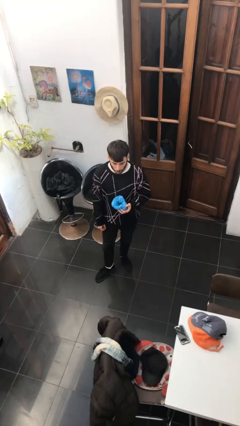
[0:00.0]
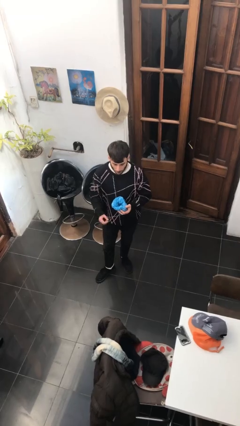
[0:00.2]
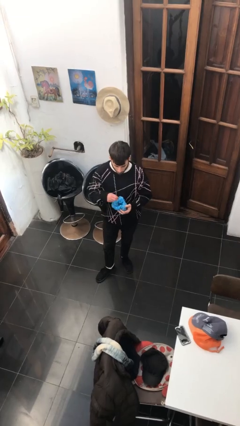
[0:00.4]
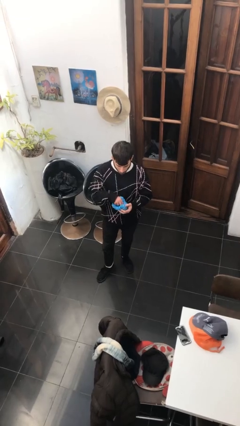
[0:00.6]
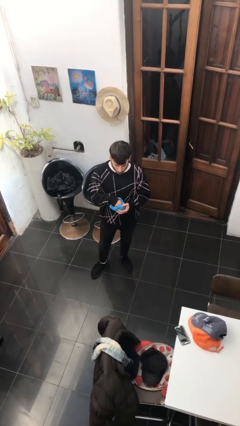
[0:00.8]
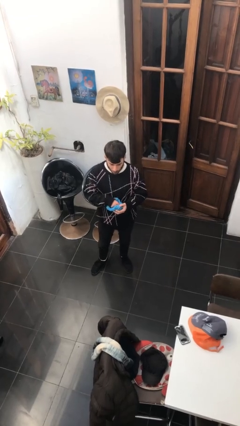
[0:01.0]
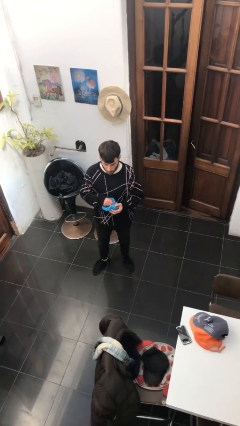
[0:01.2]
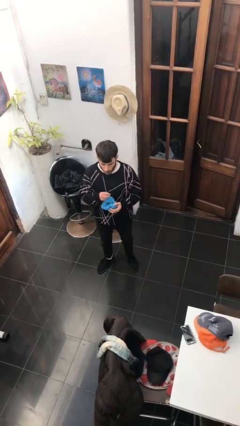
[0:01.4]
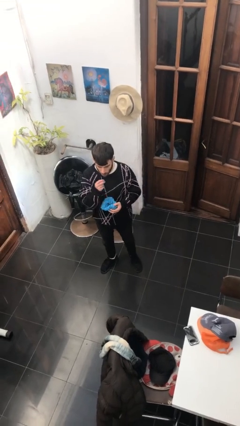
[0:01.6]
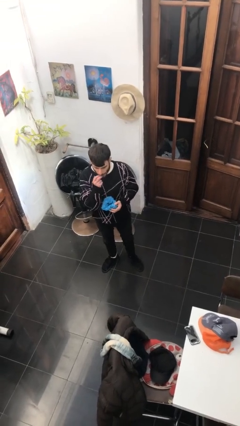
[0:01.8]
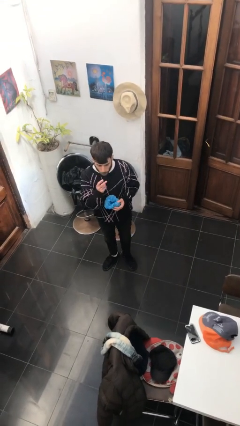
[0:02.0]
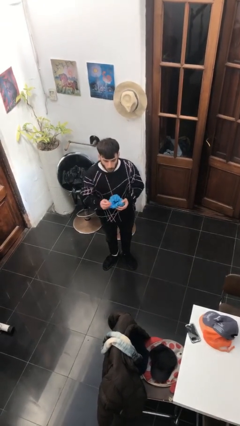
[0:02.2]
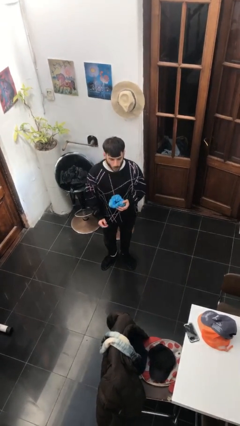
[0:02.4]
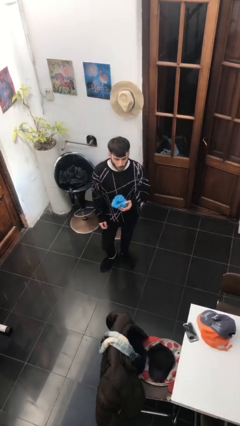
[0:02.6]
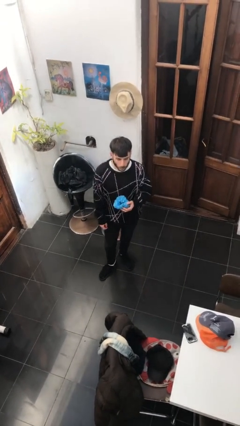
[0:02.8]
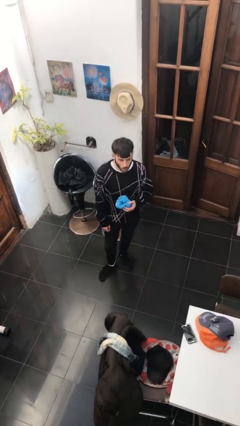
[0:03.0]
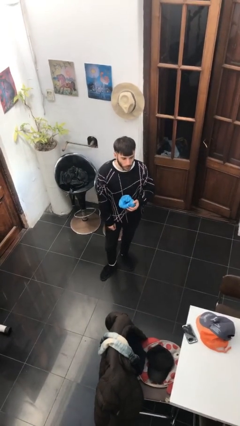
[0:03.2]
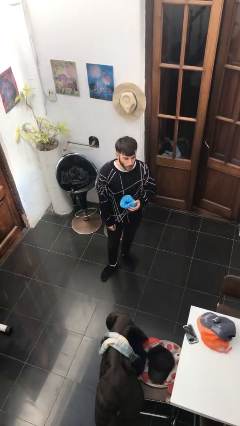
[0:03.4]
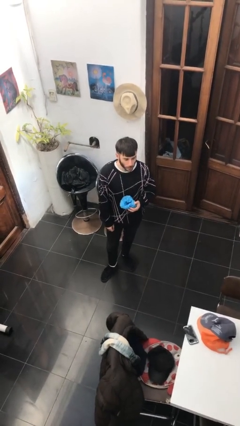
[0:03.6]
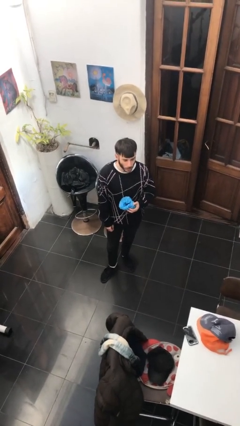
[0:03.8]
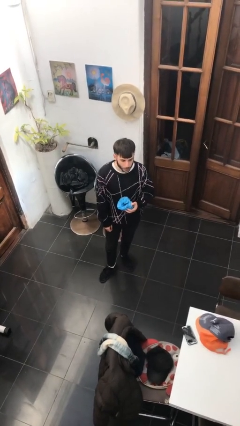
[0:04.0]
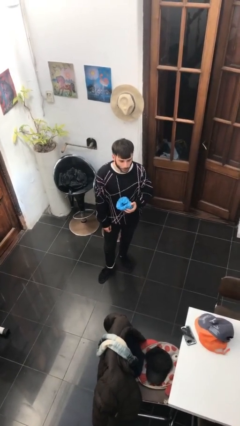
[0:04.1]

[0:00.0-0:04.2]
person eats snack from bag

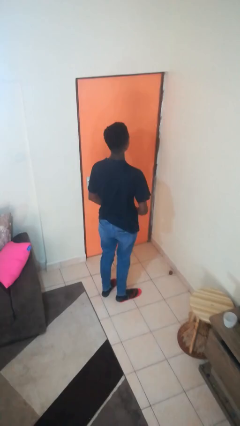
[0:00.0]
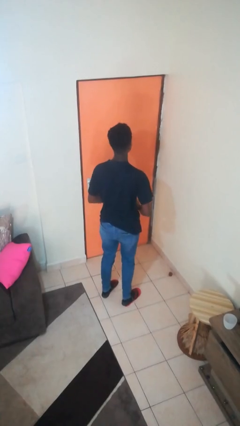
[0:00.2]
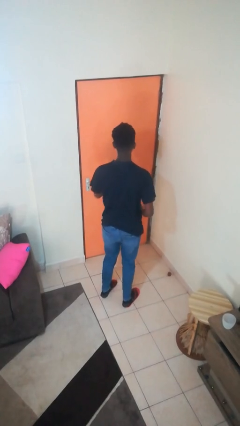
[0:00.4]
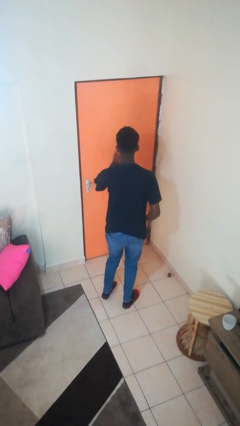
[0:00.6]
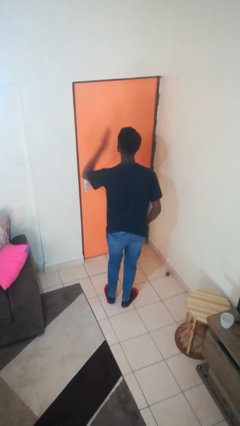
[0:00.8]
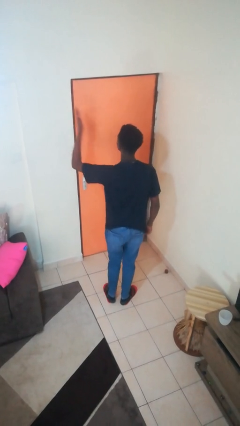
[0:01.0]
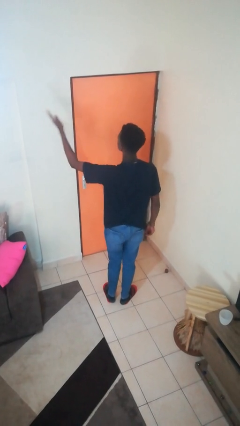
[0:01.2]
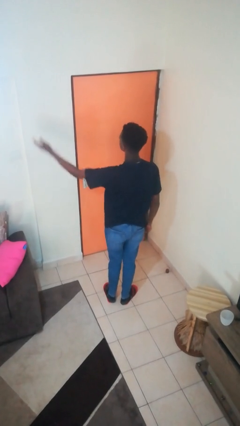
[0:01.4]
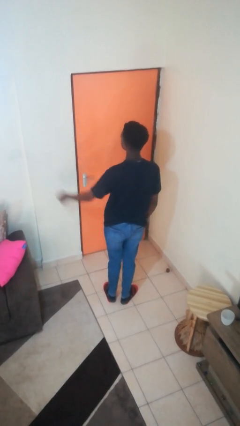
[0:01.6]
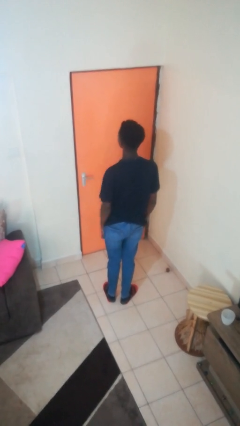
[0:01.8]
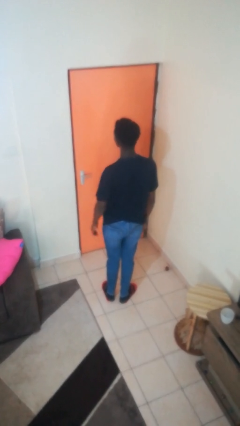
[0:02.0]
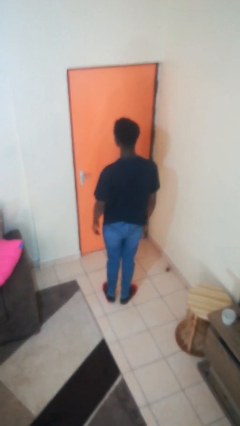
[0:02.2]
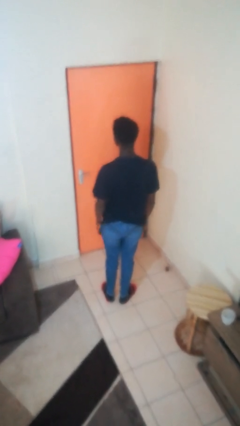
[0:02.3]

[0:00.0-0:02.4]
person gestures blow kiss

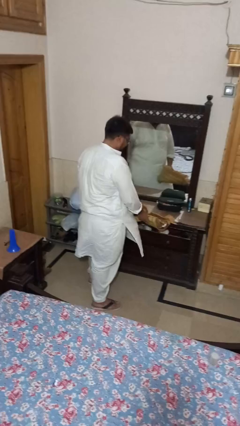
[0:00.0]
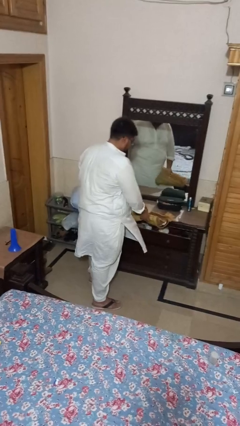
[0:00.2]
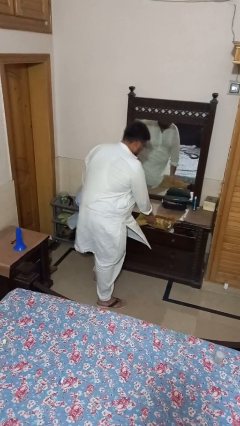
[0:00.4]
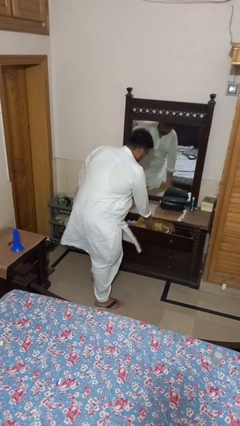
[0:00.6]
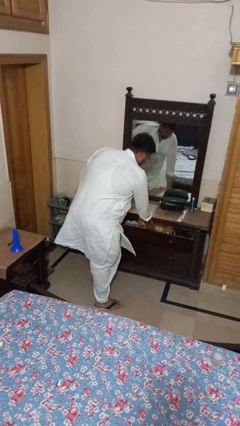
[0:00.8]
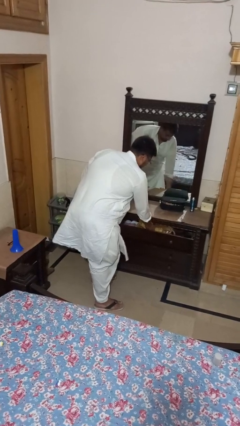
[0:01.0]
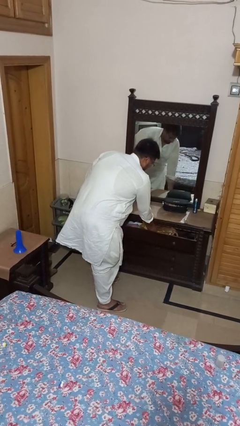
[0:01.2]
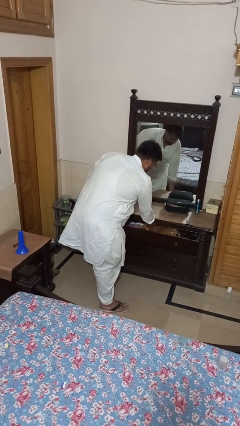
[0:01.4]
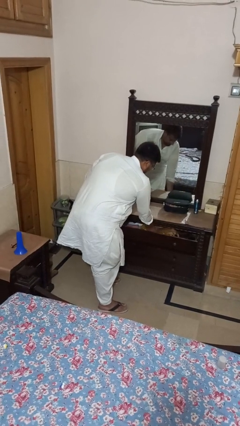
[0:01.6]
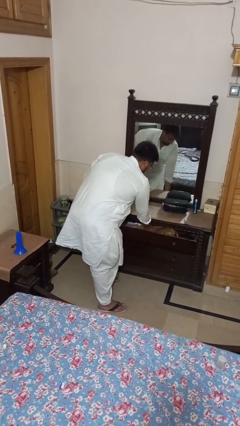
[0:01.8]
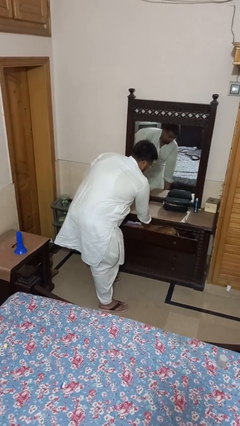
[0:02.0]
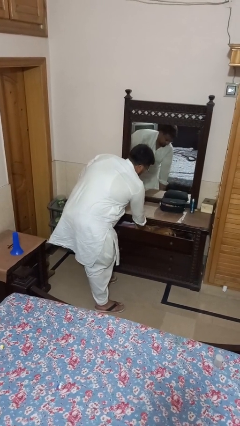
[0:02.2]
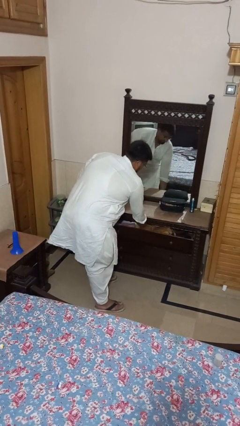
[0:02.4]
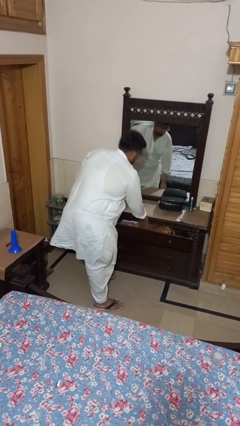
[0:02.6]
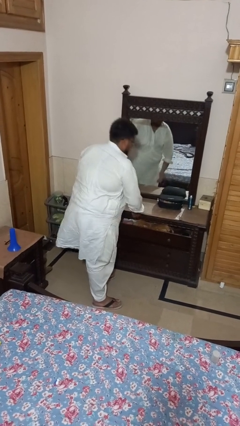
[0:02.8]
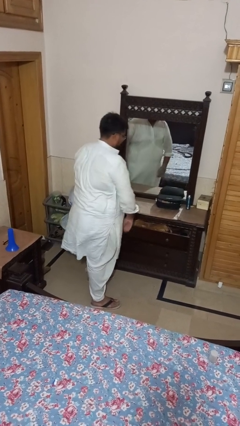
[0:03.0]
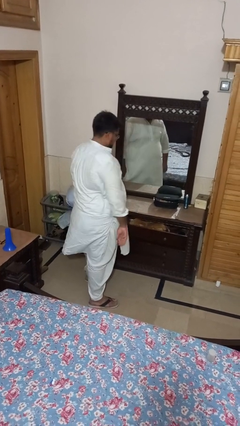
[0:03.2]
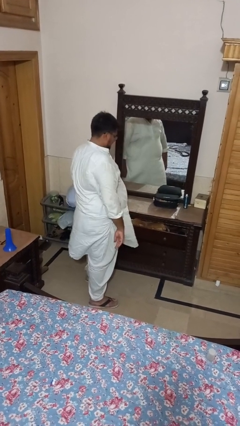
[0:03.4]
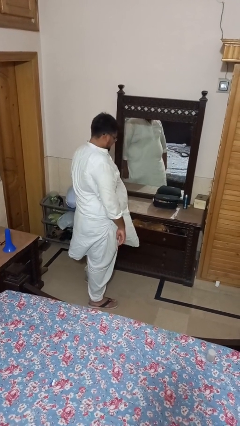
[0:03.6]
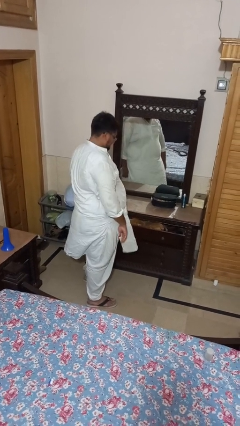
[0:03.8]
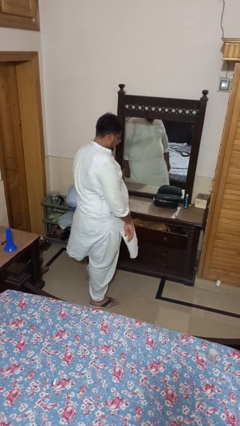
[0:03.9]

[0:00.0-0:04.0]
person puts clothes into dresser

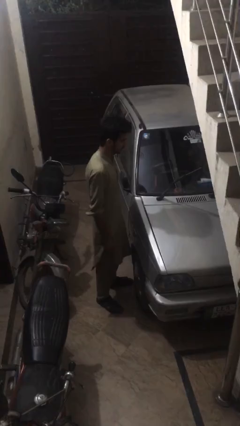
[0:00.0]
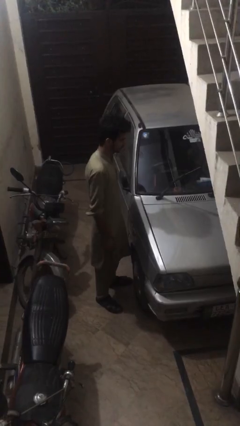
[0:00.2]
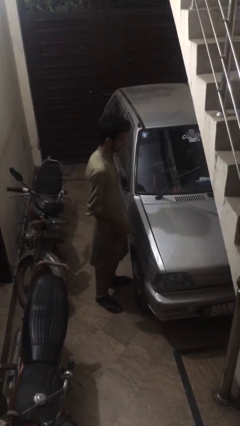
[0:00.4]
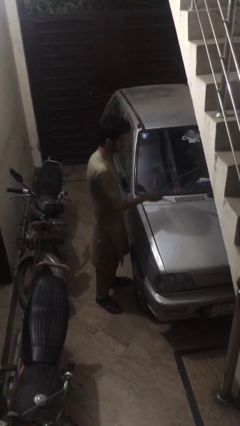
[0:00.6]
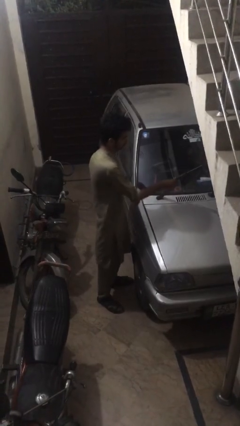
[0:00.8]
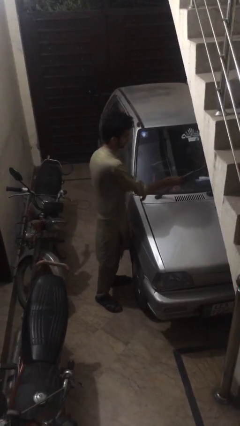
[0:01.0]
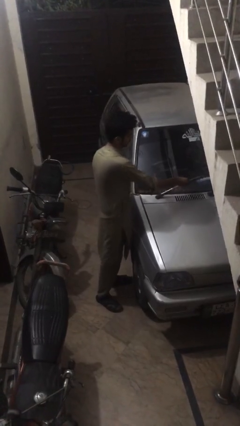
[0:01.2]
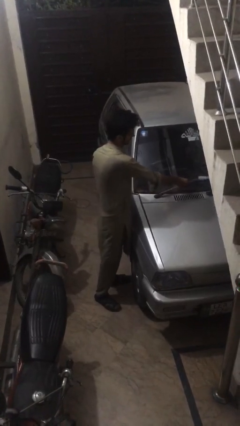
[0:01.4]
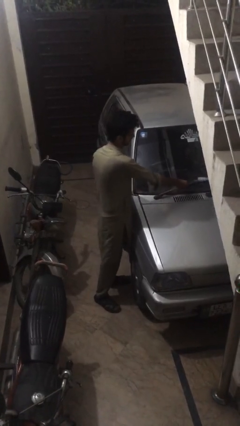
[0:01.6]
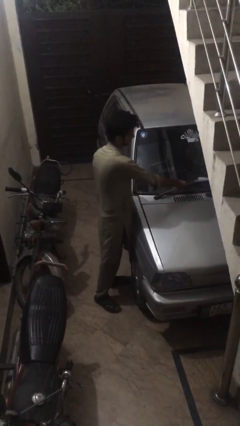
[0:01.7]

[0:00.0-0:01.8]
person flips down car wipers

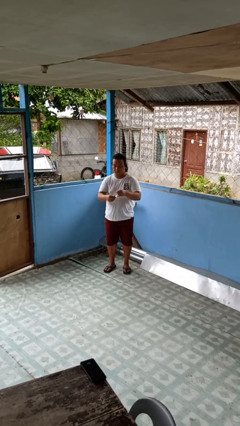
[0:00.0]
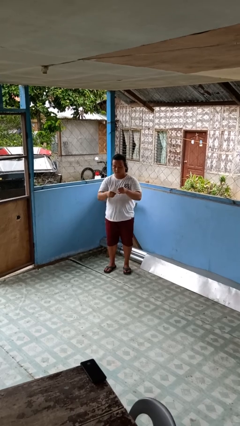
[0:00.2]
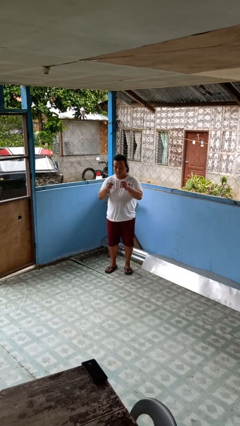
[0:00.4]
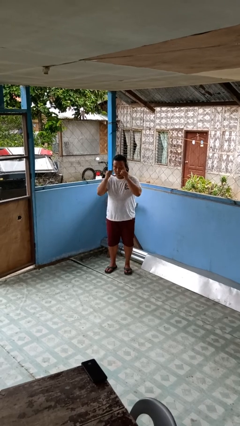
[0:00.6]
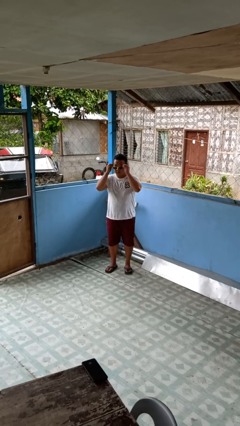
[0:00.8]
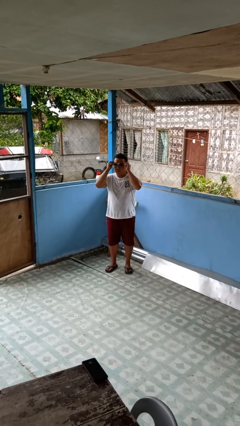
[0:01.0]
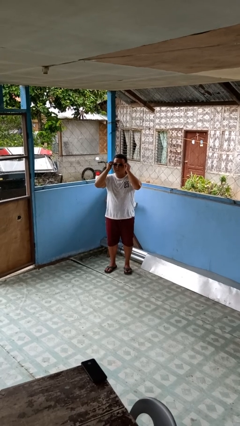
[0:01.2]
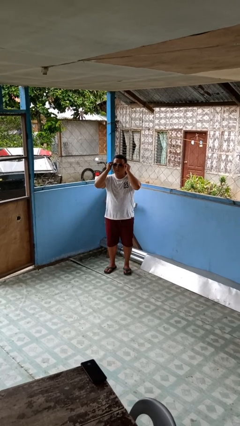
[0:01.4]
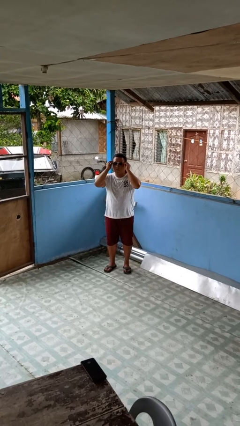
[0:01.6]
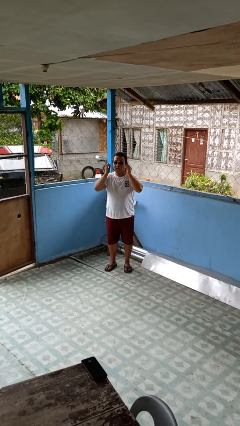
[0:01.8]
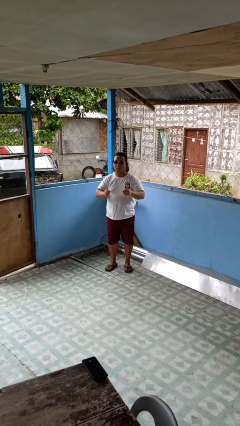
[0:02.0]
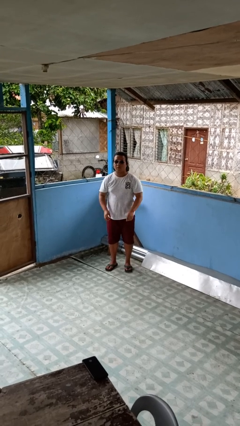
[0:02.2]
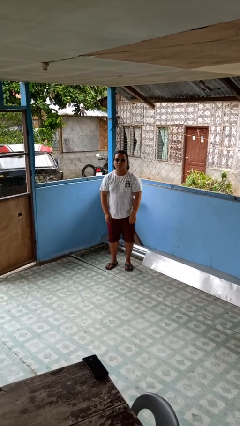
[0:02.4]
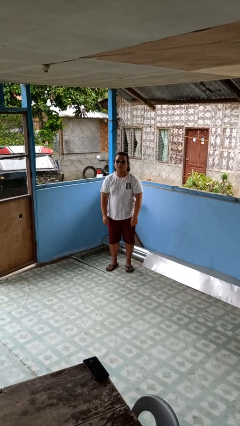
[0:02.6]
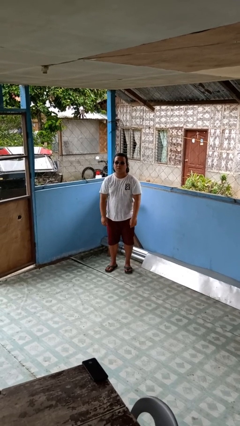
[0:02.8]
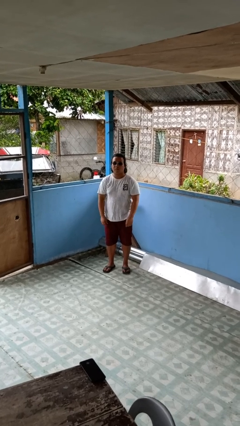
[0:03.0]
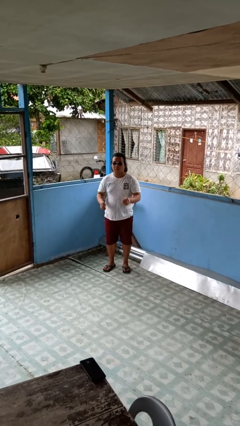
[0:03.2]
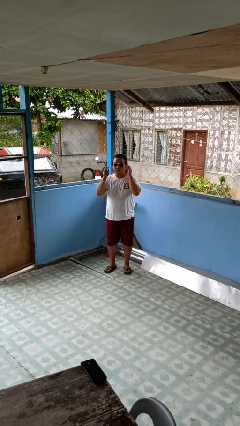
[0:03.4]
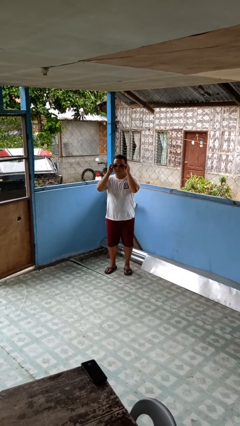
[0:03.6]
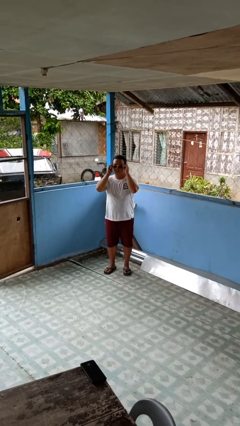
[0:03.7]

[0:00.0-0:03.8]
person puts on sunglasses

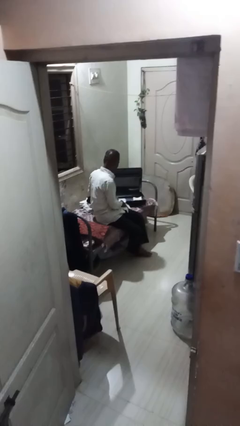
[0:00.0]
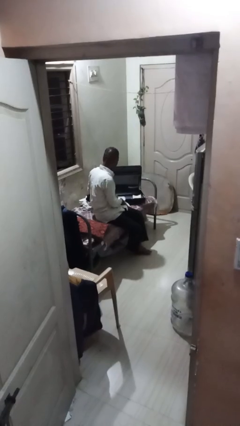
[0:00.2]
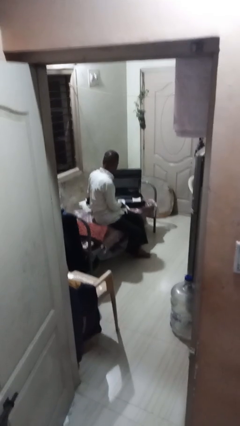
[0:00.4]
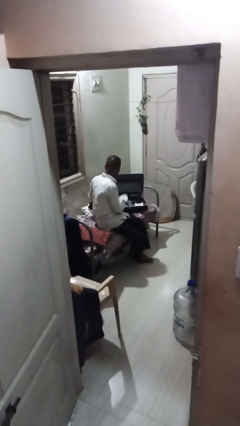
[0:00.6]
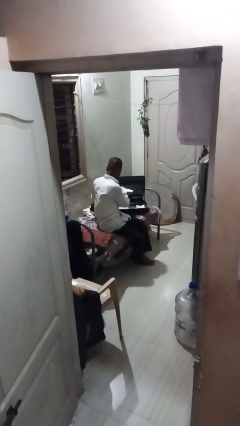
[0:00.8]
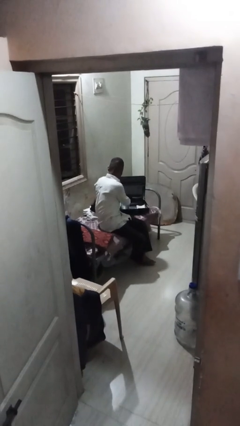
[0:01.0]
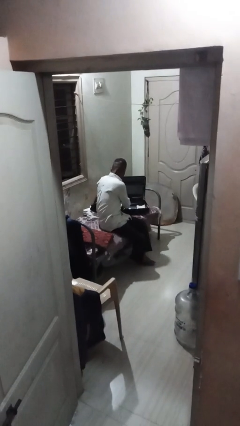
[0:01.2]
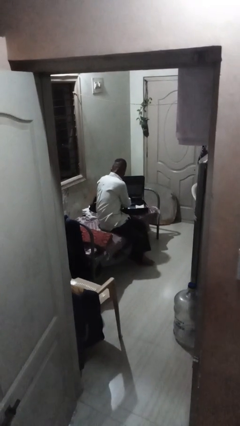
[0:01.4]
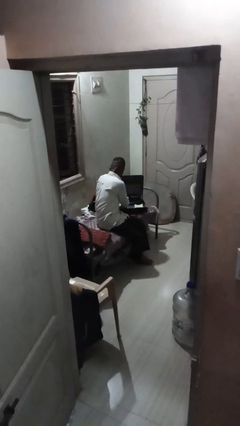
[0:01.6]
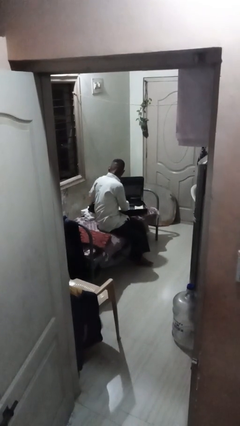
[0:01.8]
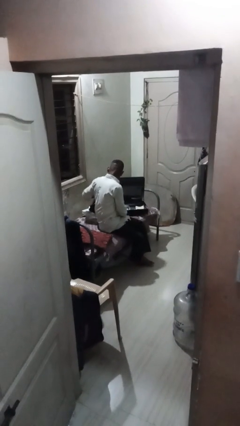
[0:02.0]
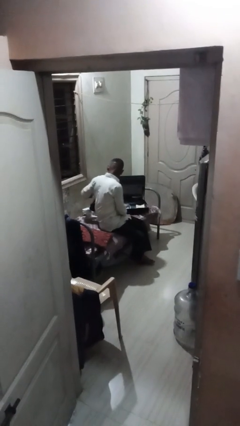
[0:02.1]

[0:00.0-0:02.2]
person loads clothes into suitcase
